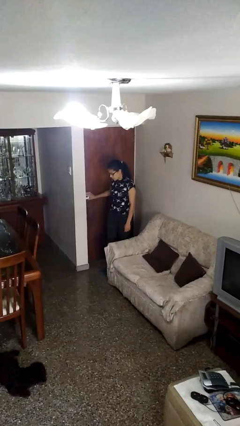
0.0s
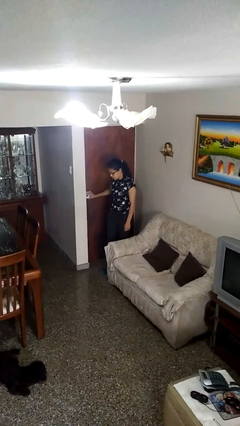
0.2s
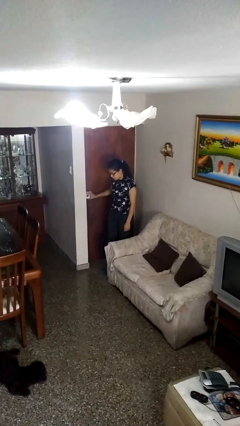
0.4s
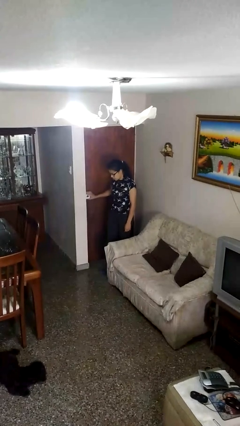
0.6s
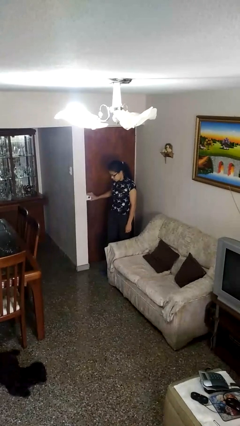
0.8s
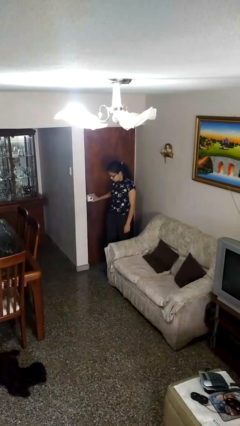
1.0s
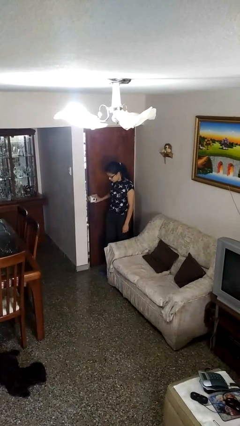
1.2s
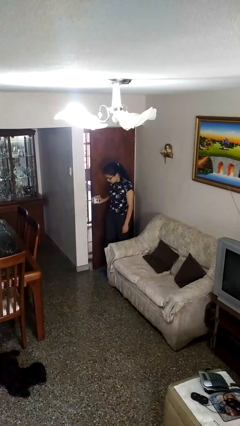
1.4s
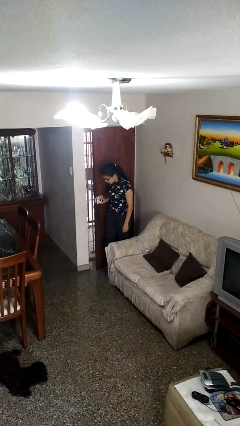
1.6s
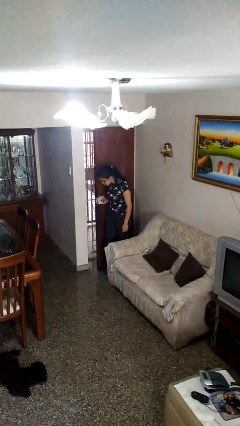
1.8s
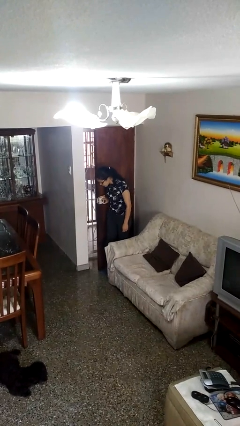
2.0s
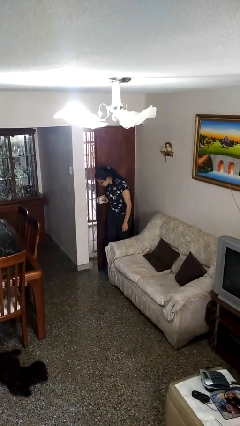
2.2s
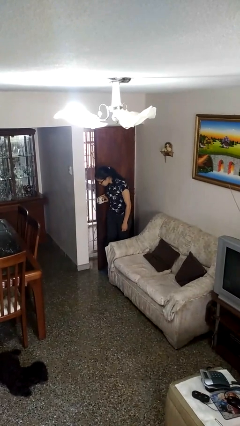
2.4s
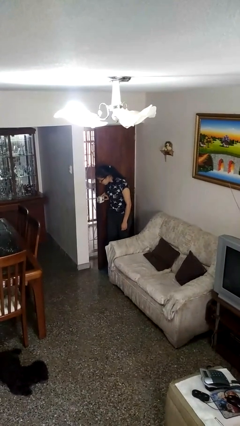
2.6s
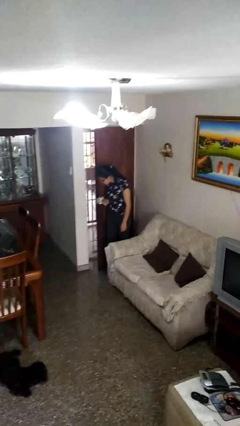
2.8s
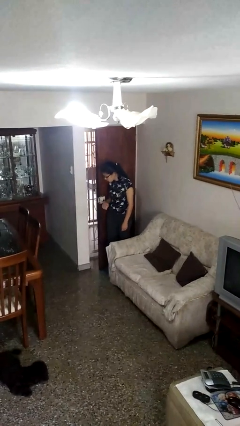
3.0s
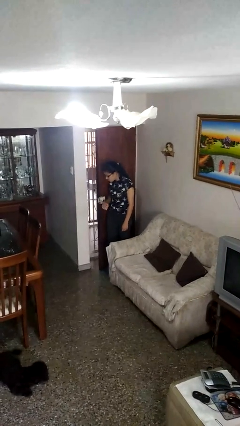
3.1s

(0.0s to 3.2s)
person opens facility door

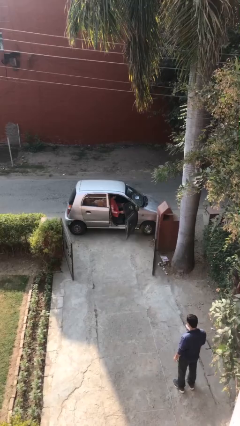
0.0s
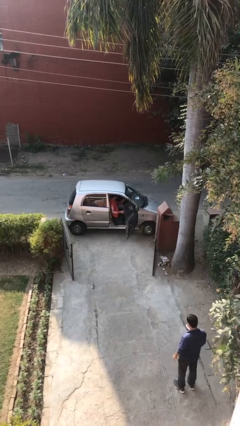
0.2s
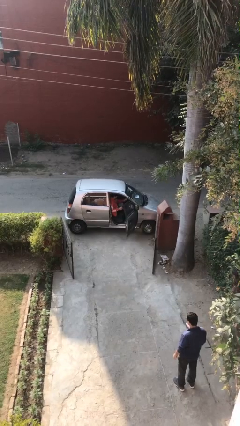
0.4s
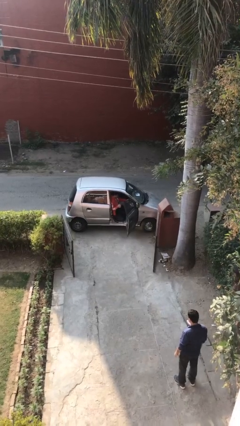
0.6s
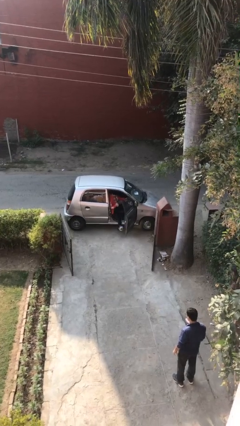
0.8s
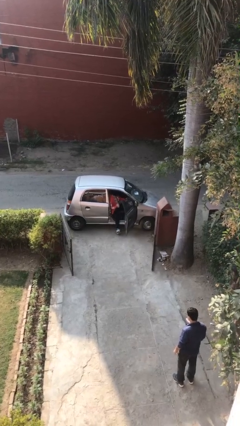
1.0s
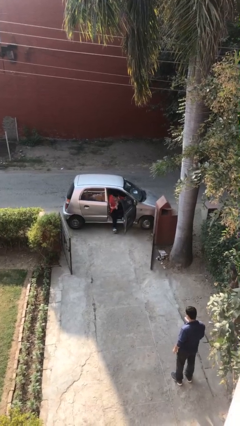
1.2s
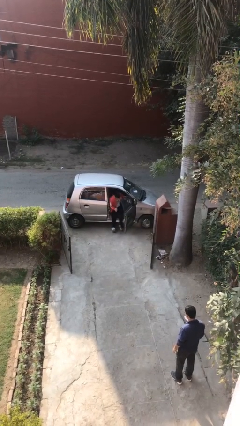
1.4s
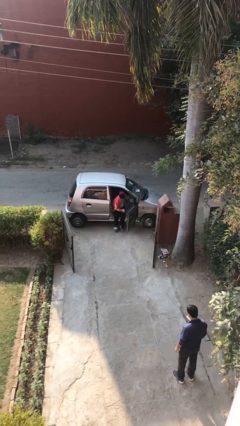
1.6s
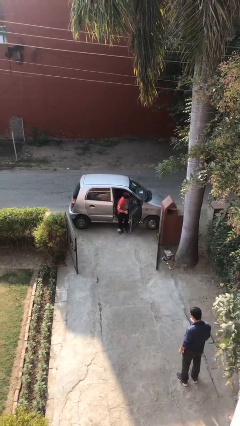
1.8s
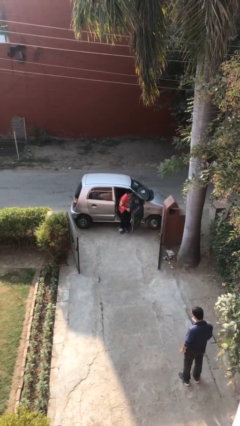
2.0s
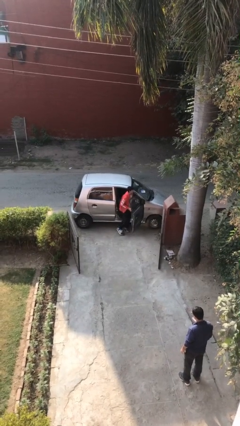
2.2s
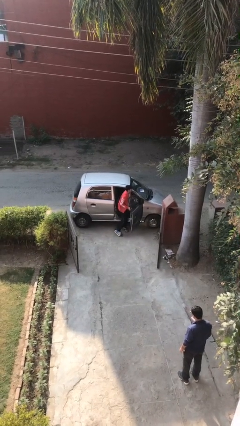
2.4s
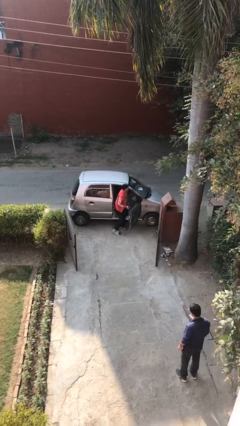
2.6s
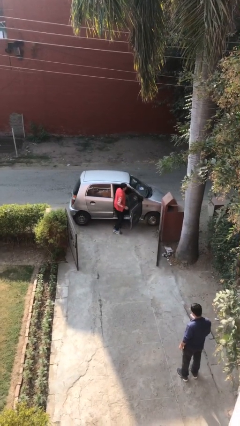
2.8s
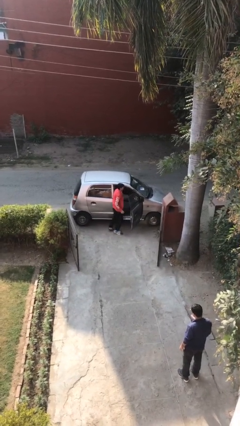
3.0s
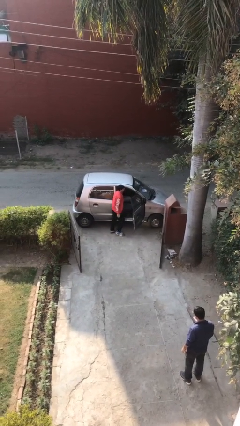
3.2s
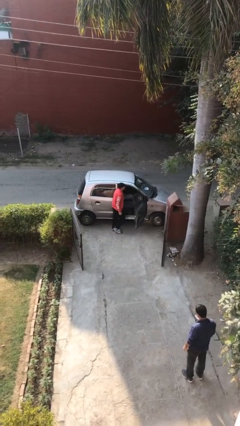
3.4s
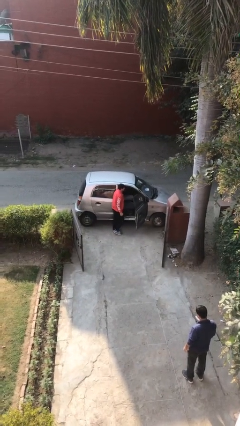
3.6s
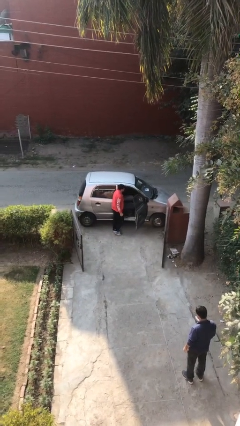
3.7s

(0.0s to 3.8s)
person exits car

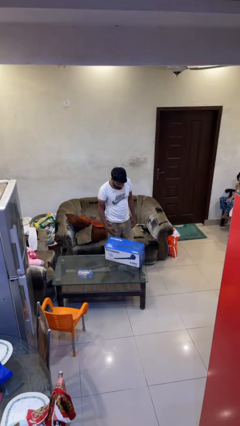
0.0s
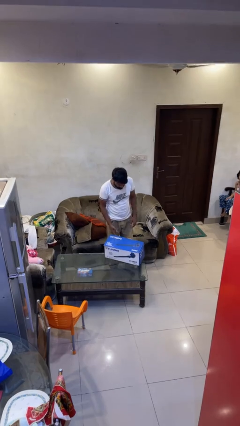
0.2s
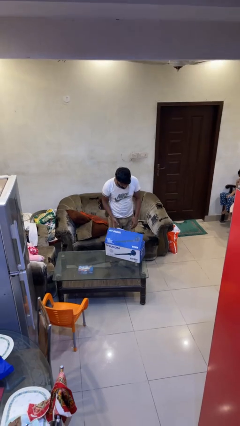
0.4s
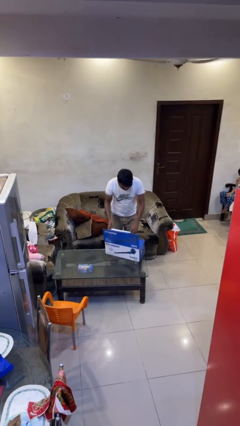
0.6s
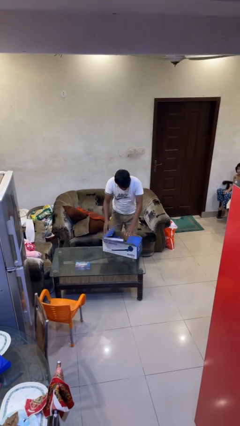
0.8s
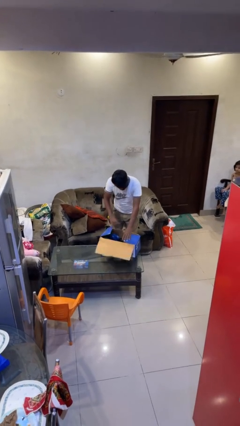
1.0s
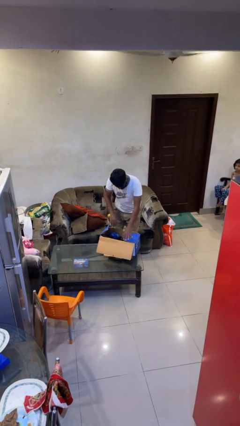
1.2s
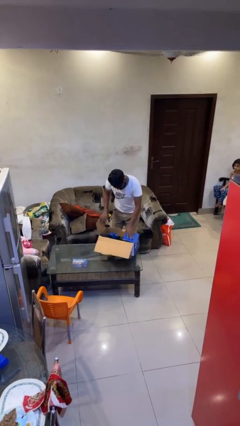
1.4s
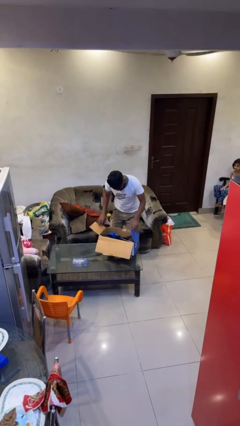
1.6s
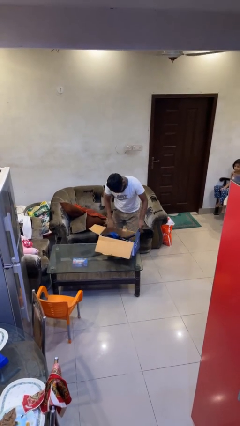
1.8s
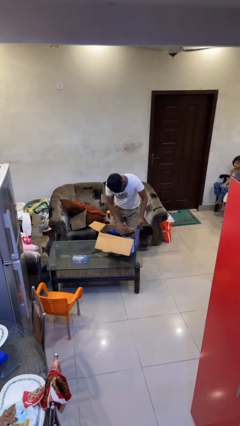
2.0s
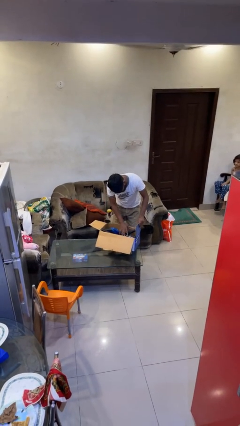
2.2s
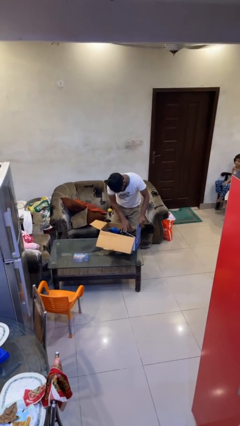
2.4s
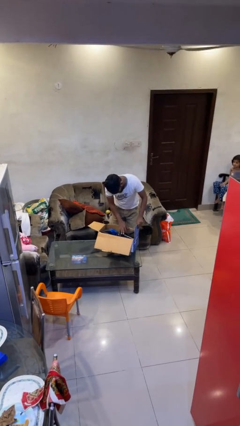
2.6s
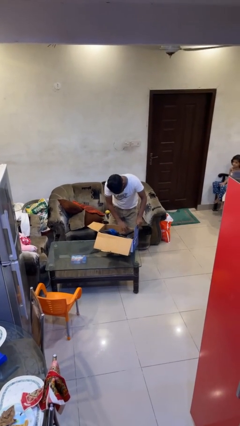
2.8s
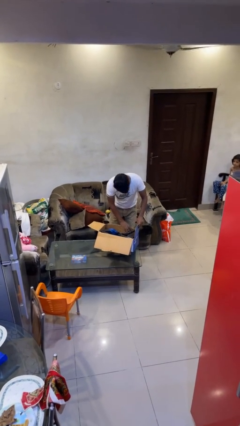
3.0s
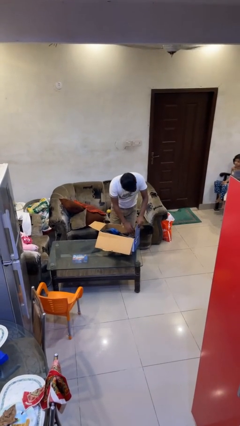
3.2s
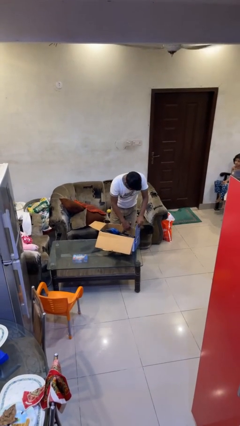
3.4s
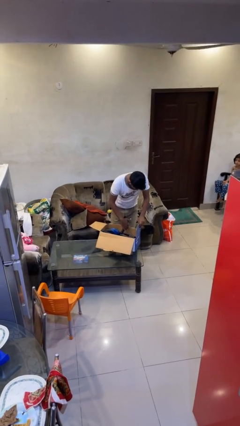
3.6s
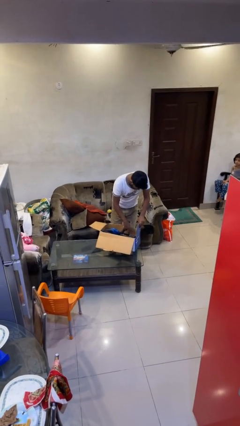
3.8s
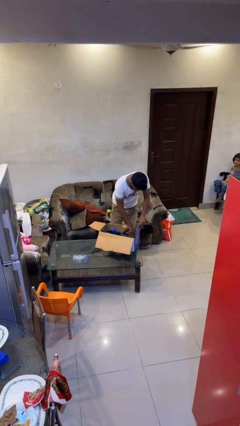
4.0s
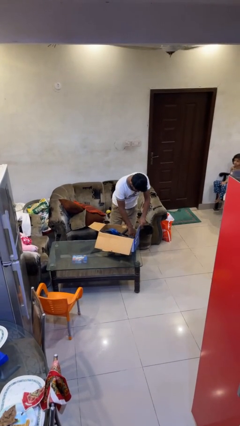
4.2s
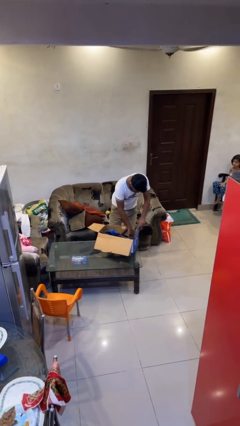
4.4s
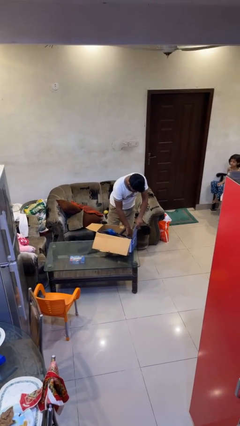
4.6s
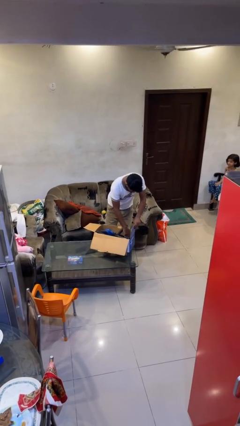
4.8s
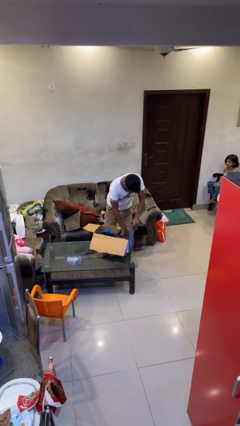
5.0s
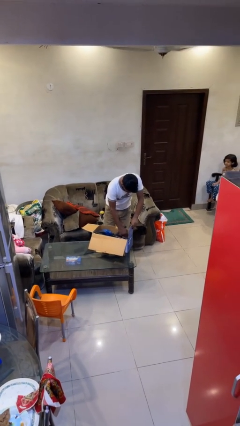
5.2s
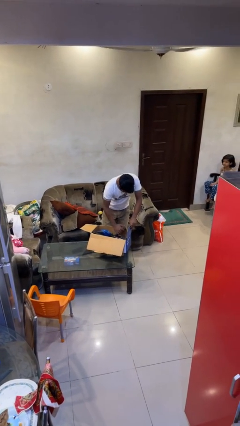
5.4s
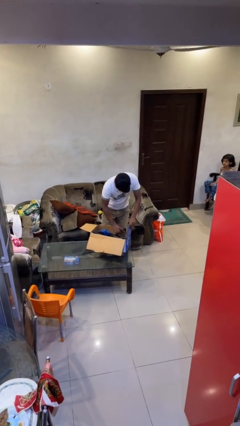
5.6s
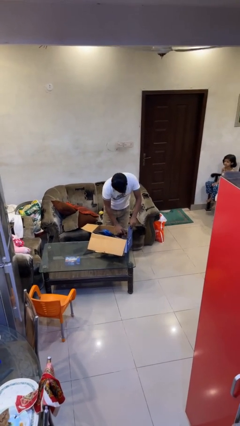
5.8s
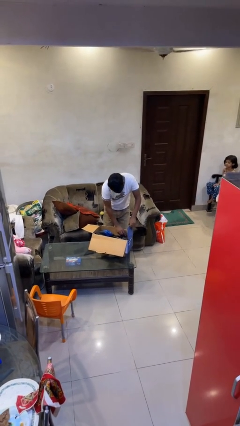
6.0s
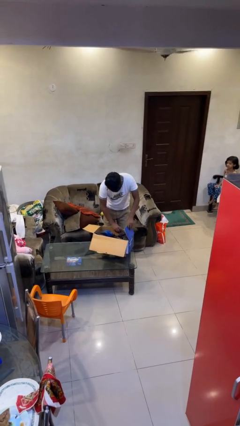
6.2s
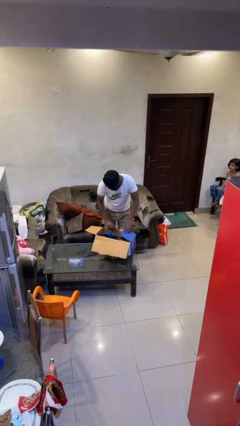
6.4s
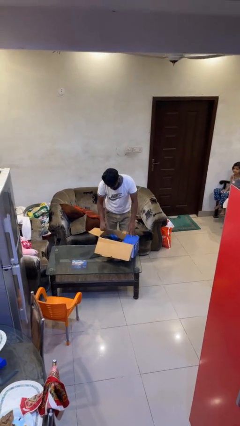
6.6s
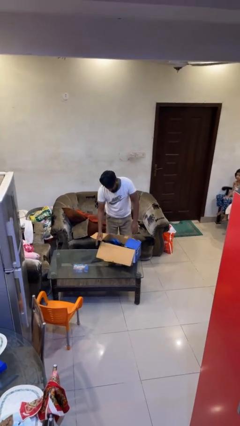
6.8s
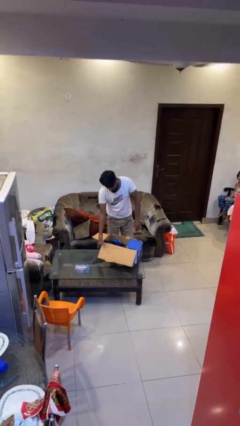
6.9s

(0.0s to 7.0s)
person searches in box

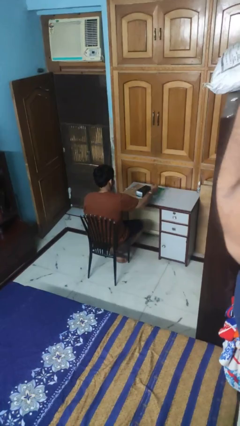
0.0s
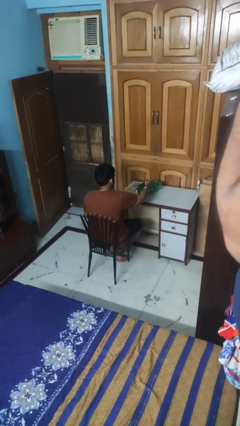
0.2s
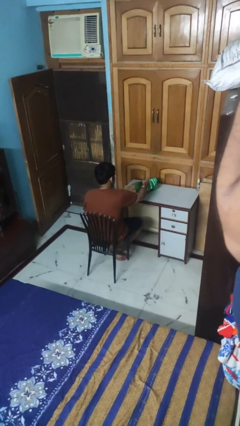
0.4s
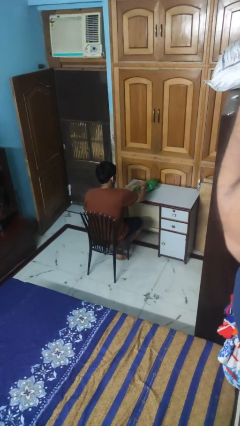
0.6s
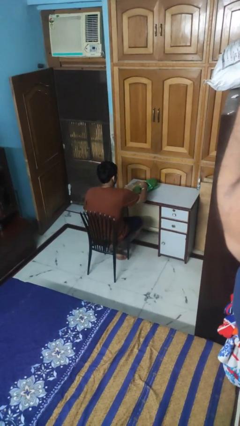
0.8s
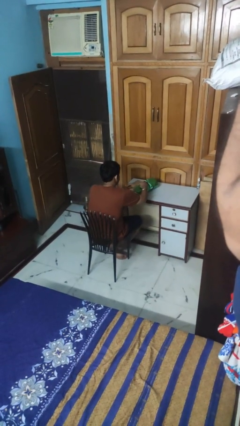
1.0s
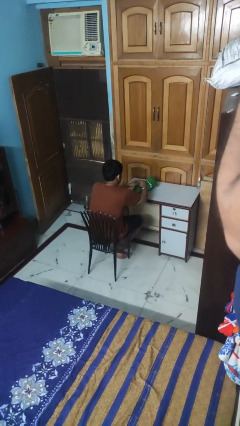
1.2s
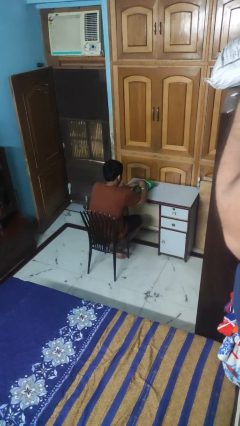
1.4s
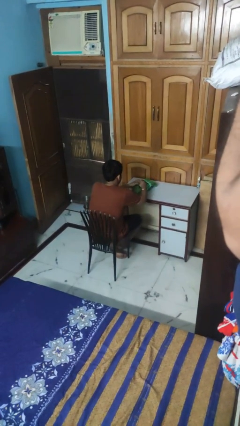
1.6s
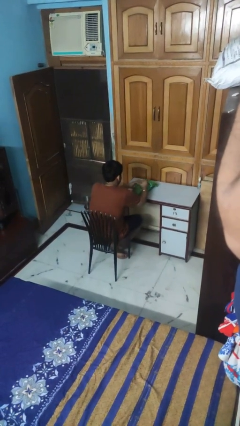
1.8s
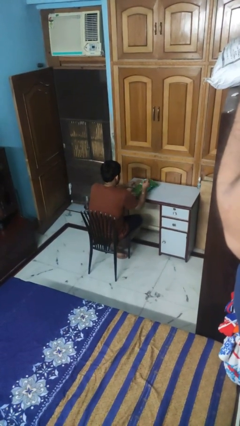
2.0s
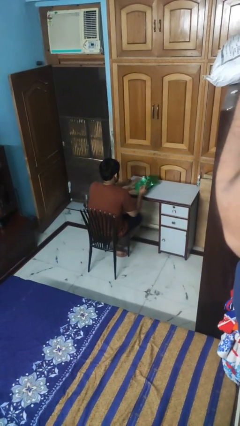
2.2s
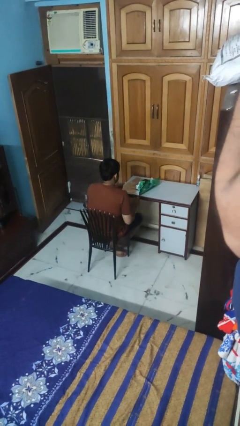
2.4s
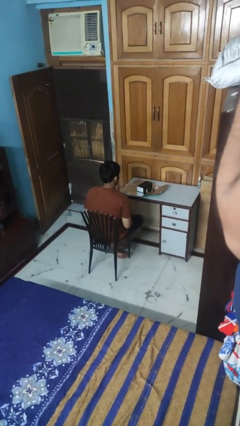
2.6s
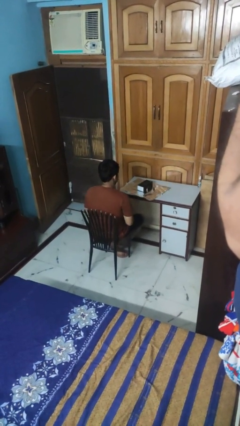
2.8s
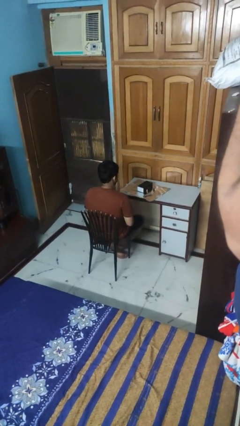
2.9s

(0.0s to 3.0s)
person wraps box

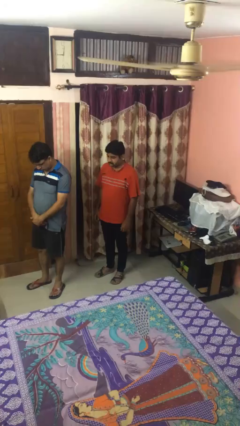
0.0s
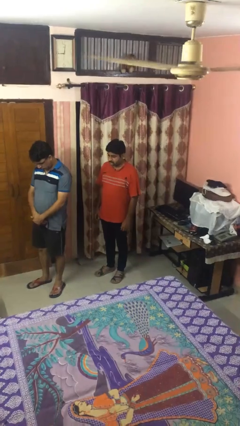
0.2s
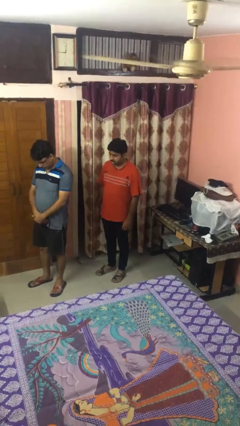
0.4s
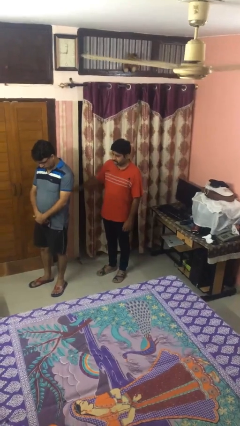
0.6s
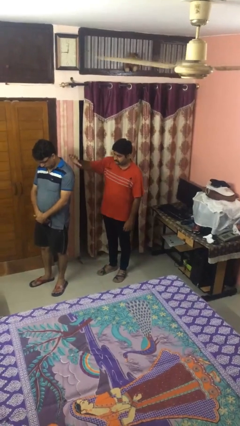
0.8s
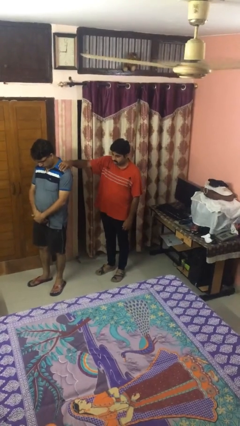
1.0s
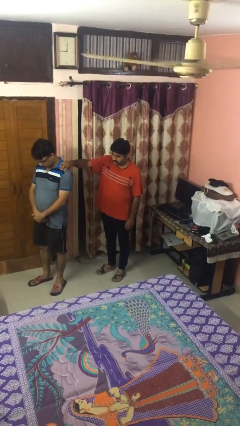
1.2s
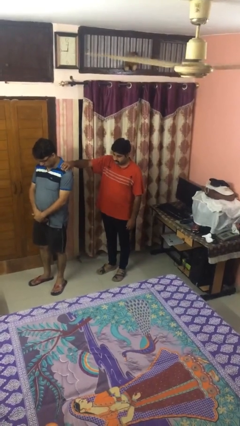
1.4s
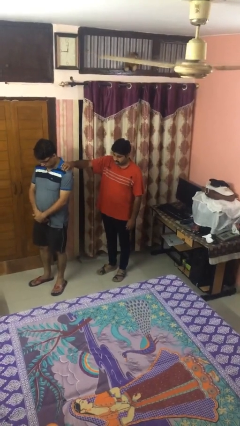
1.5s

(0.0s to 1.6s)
person grabs person by shoulder
